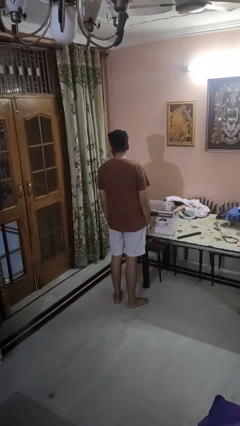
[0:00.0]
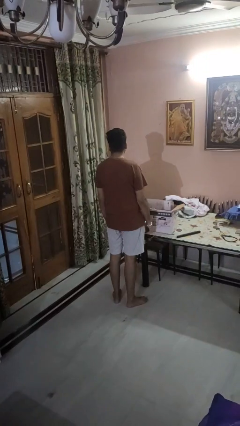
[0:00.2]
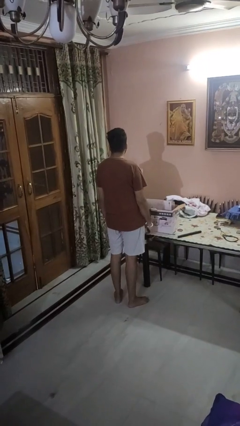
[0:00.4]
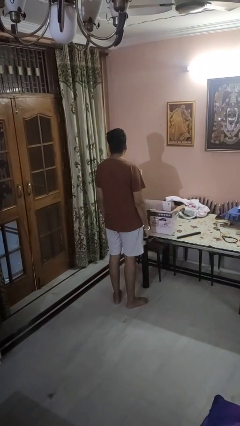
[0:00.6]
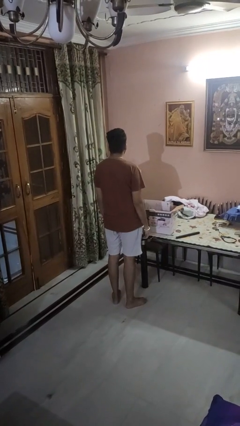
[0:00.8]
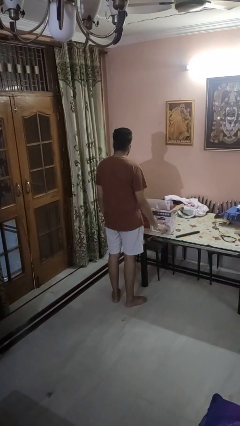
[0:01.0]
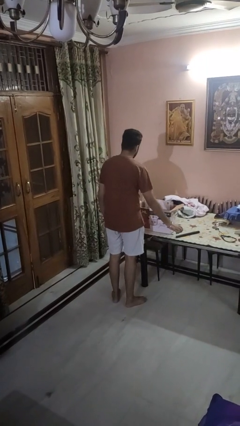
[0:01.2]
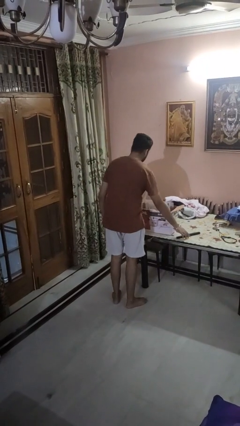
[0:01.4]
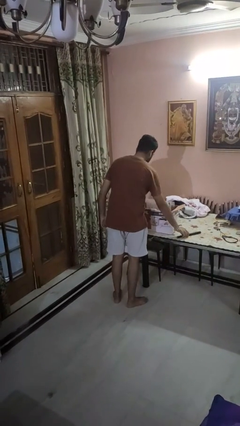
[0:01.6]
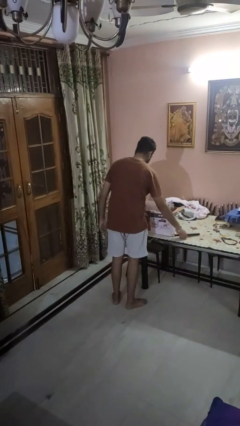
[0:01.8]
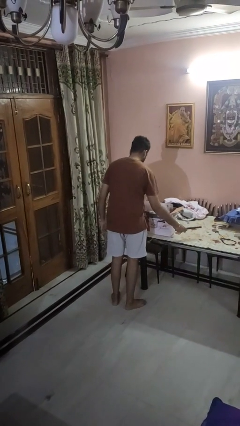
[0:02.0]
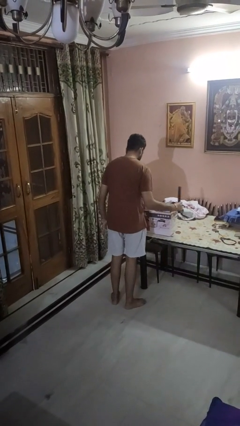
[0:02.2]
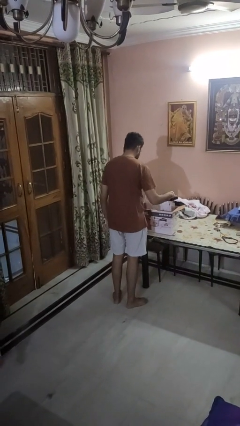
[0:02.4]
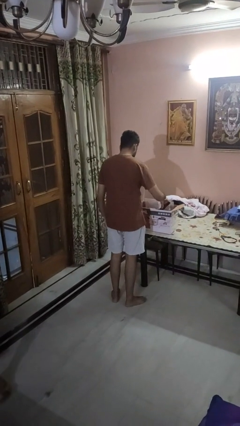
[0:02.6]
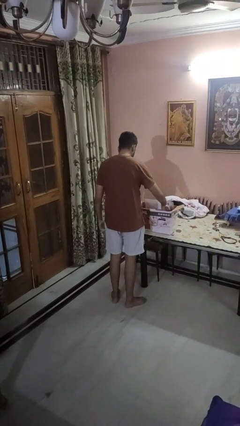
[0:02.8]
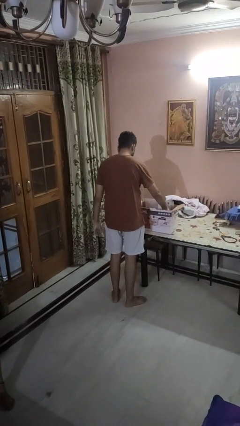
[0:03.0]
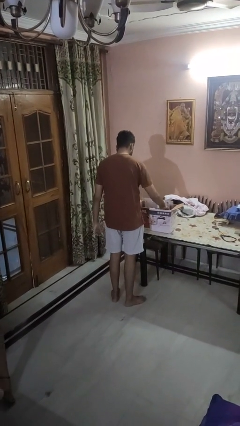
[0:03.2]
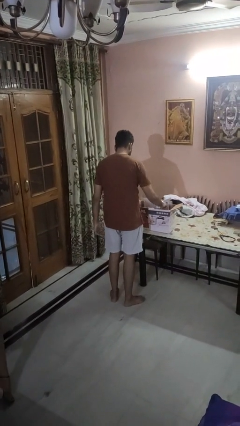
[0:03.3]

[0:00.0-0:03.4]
person puts object into box

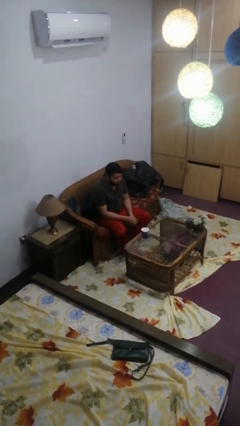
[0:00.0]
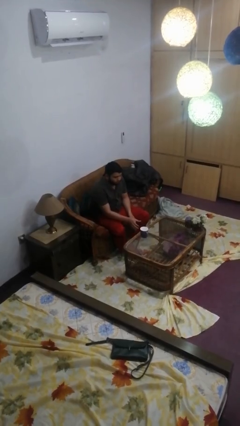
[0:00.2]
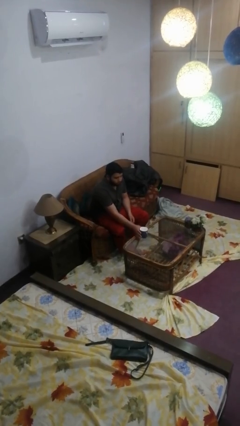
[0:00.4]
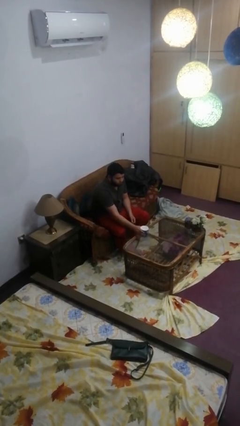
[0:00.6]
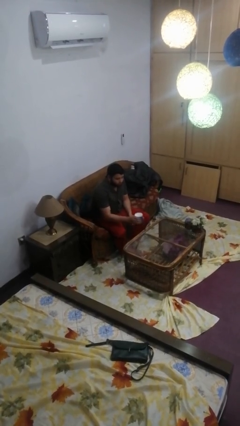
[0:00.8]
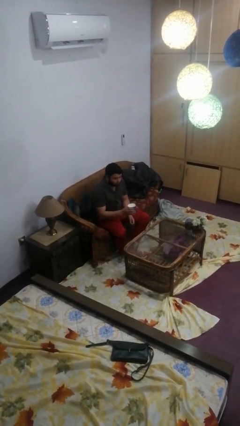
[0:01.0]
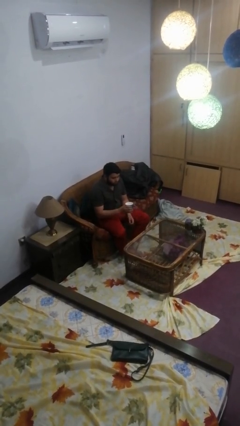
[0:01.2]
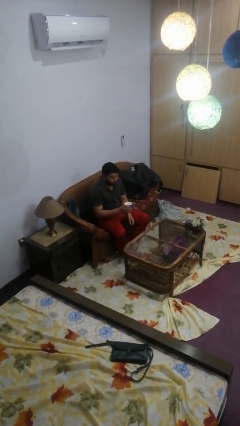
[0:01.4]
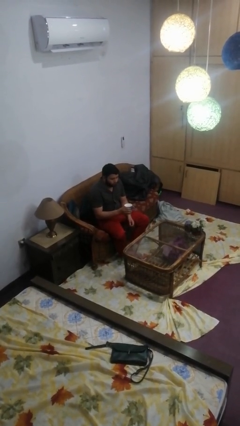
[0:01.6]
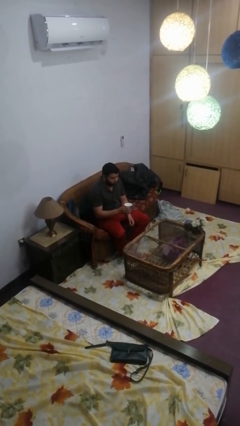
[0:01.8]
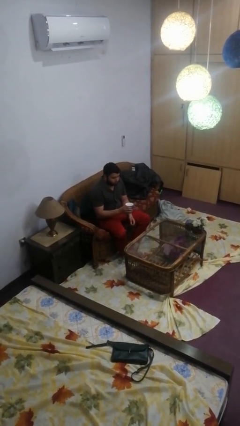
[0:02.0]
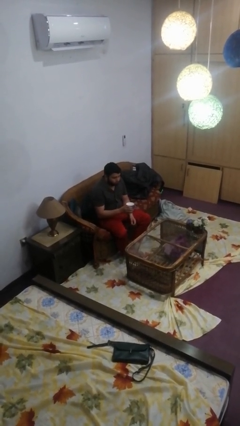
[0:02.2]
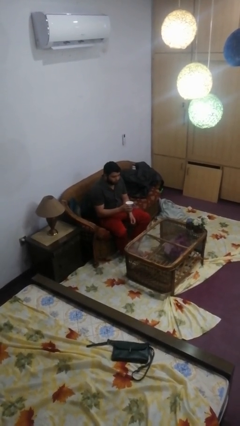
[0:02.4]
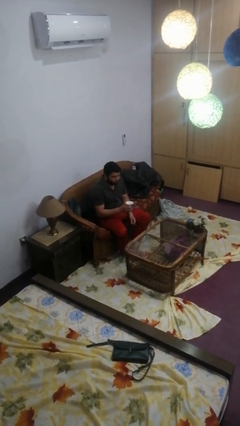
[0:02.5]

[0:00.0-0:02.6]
person picks up object from table

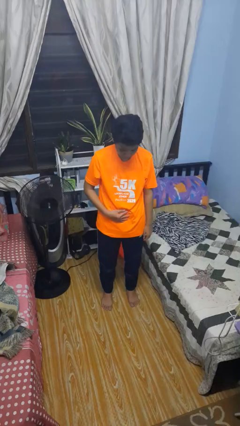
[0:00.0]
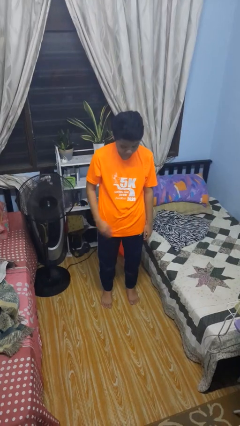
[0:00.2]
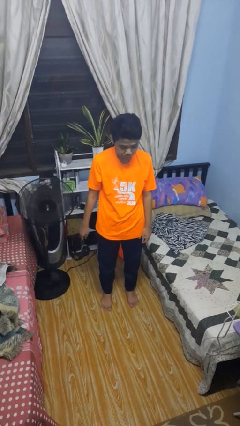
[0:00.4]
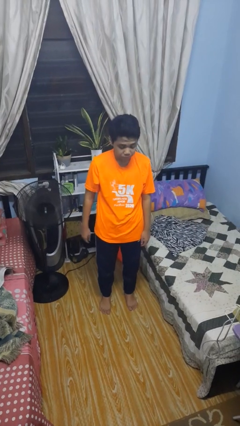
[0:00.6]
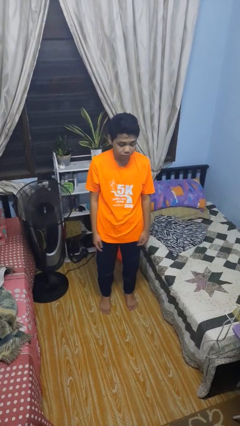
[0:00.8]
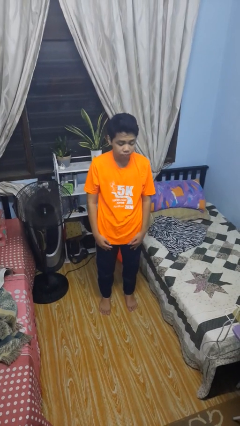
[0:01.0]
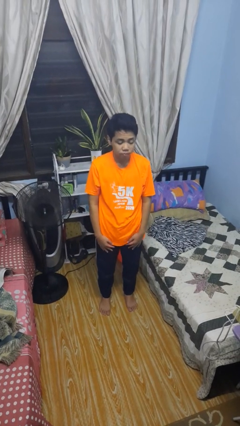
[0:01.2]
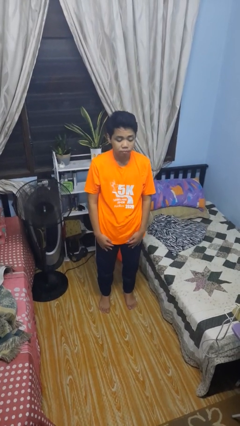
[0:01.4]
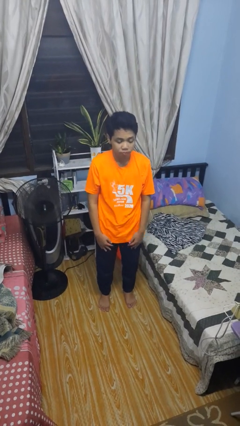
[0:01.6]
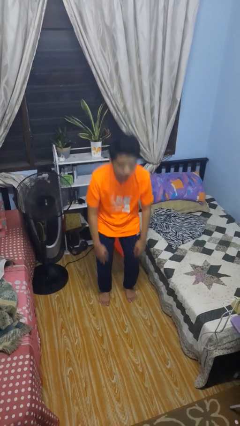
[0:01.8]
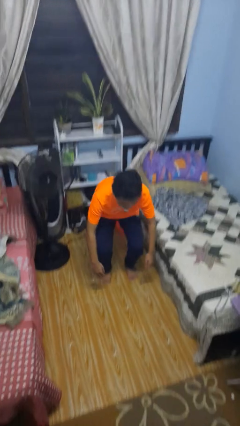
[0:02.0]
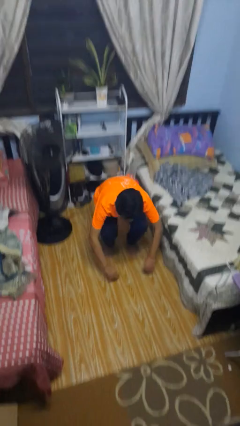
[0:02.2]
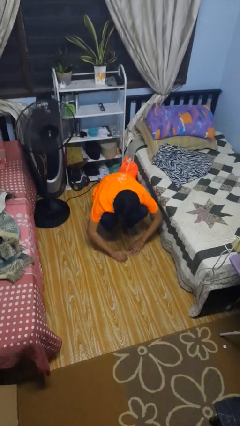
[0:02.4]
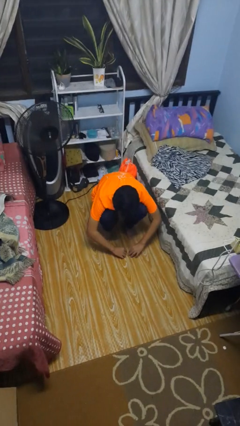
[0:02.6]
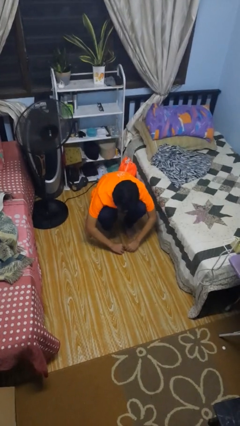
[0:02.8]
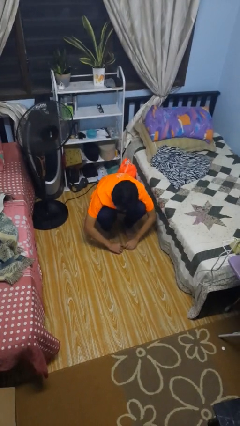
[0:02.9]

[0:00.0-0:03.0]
person squats

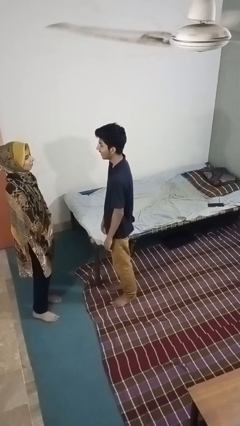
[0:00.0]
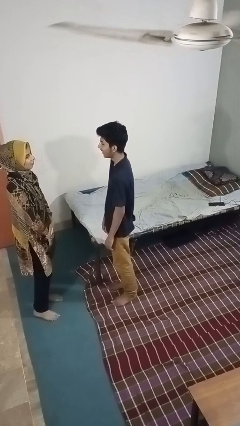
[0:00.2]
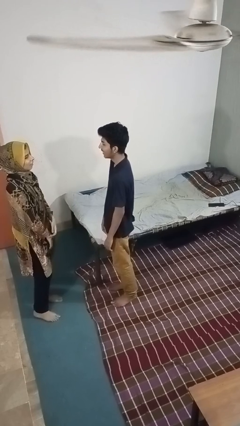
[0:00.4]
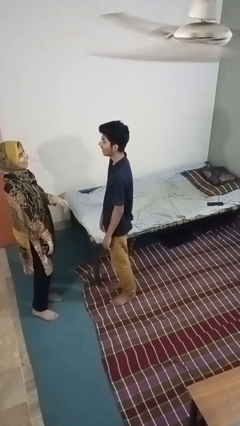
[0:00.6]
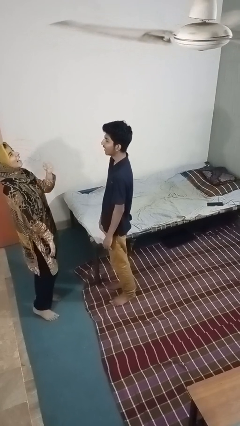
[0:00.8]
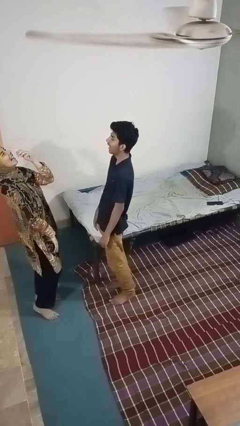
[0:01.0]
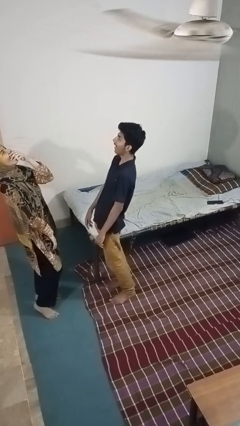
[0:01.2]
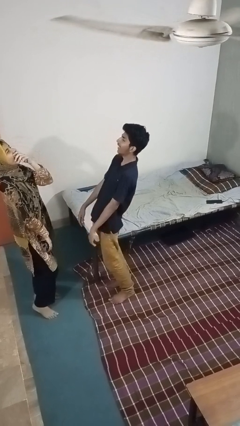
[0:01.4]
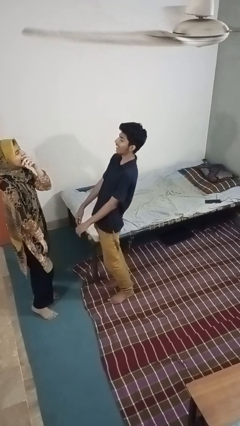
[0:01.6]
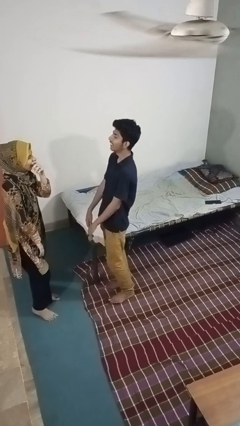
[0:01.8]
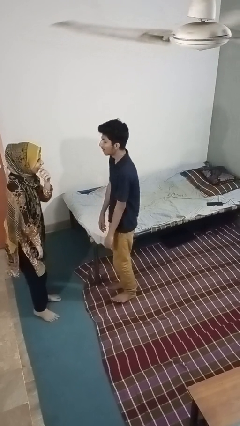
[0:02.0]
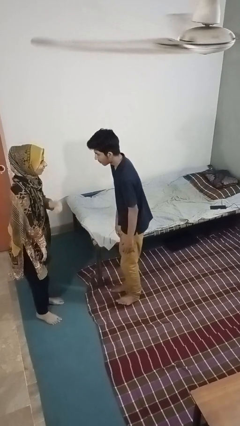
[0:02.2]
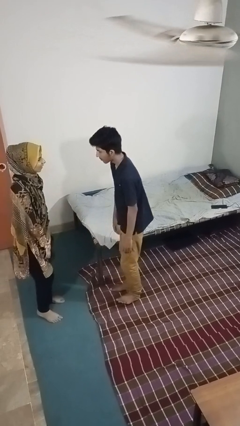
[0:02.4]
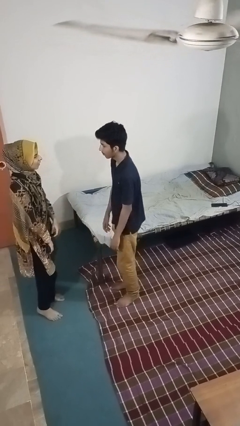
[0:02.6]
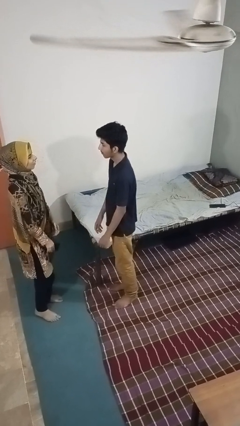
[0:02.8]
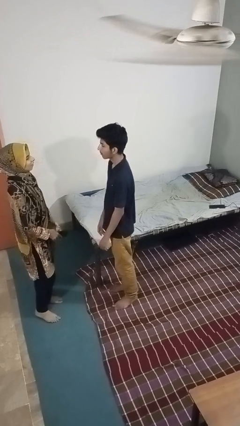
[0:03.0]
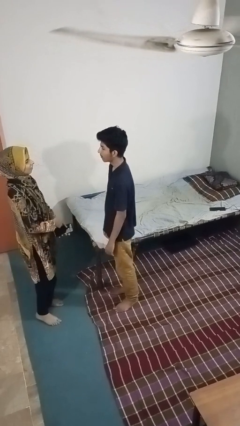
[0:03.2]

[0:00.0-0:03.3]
person laughs with person

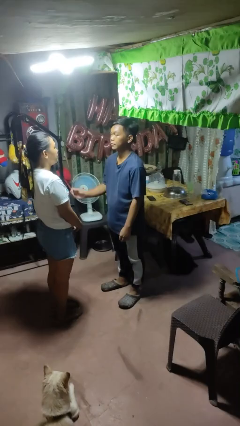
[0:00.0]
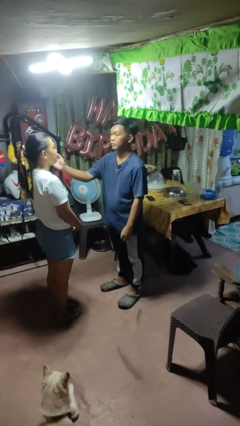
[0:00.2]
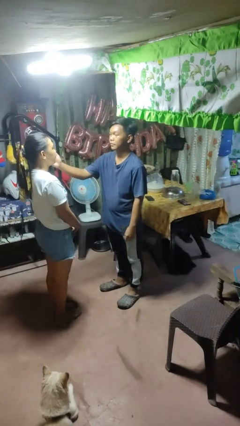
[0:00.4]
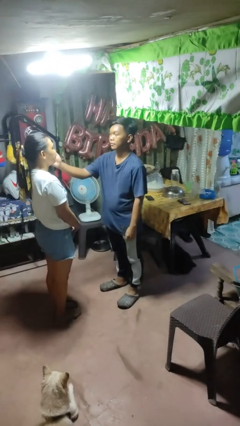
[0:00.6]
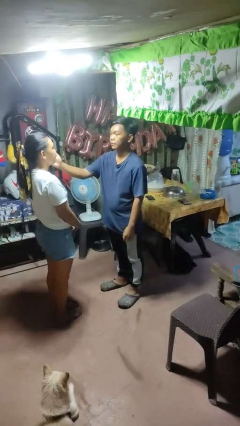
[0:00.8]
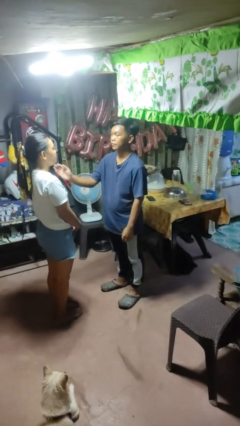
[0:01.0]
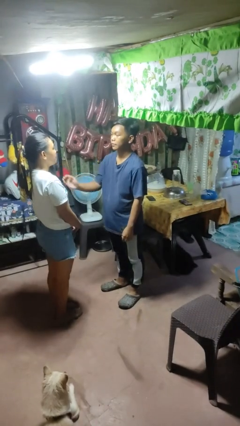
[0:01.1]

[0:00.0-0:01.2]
person touches face of person

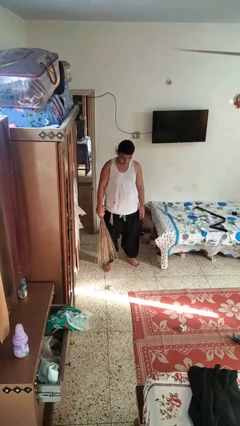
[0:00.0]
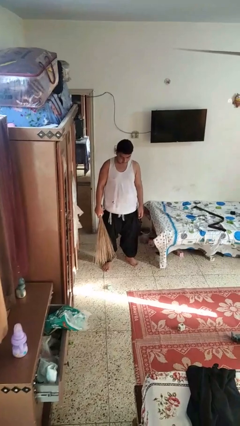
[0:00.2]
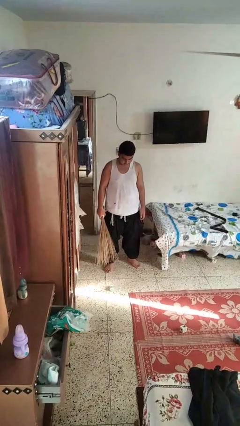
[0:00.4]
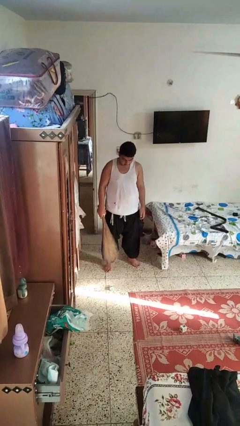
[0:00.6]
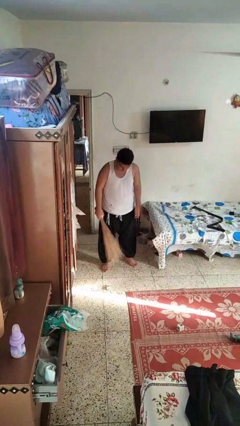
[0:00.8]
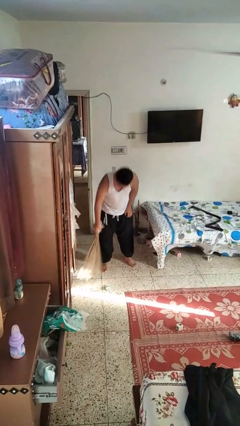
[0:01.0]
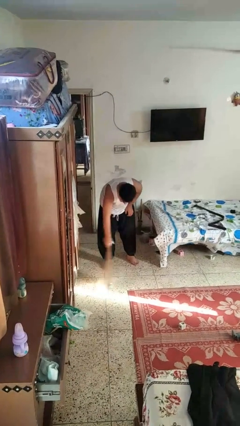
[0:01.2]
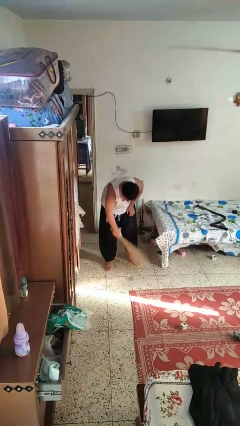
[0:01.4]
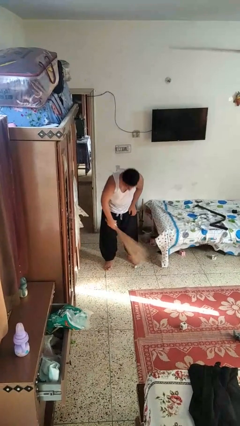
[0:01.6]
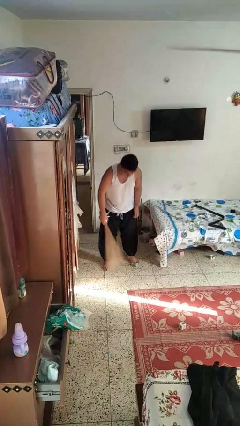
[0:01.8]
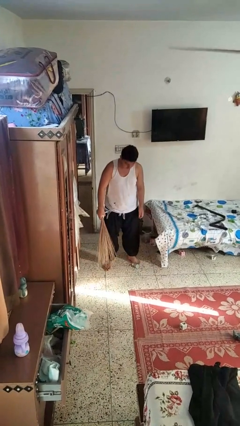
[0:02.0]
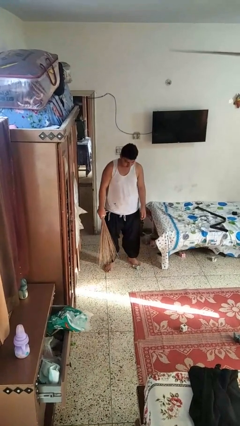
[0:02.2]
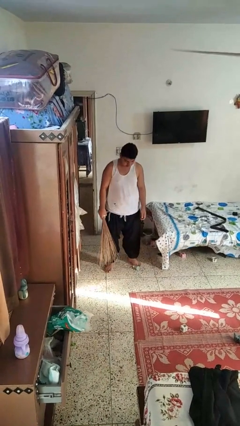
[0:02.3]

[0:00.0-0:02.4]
person sweeps floor

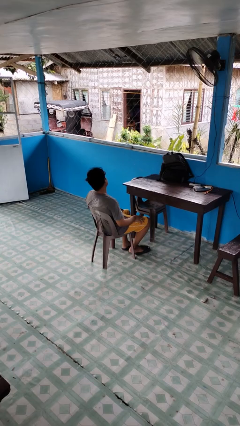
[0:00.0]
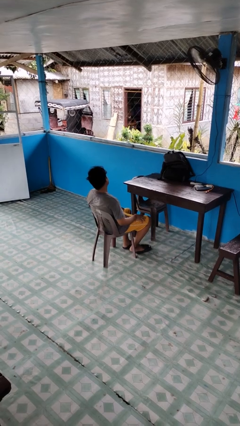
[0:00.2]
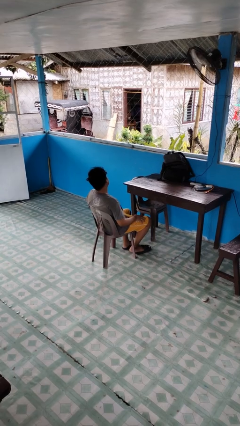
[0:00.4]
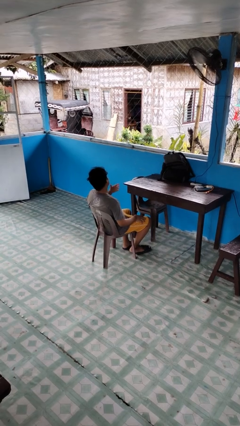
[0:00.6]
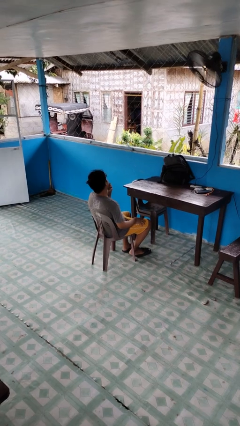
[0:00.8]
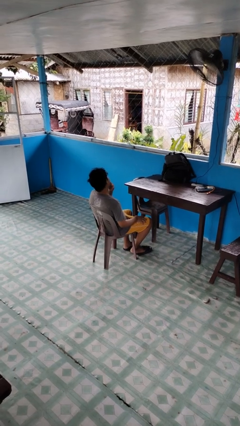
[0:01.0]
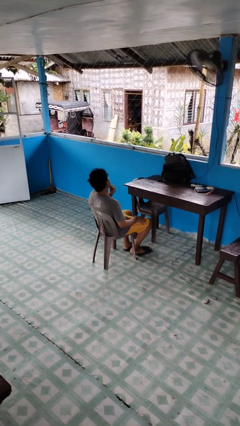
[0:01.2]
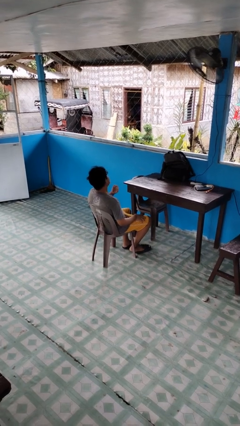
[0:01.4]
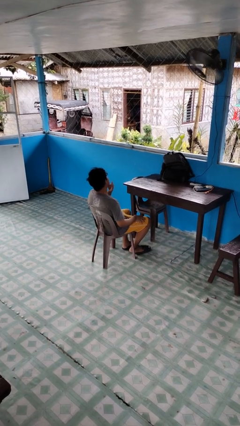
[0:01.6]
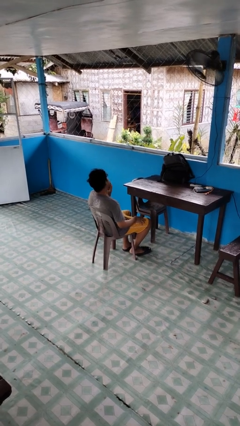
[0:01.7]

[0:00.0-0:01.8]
person strokes chin
